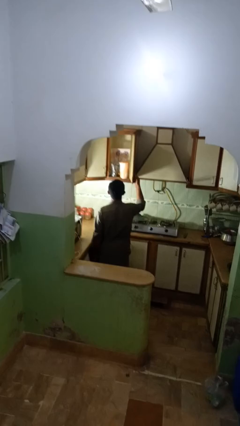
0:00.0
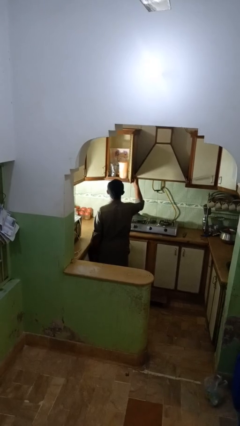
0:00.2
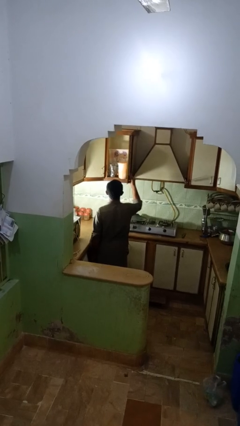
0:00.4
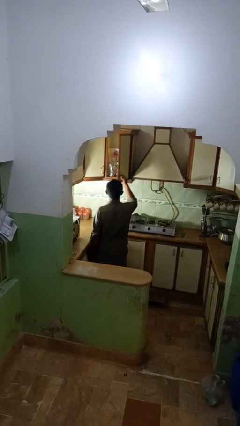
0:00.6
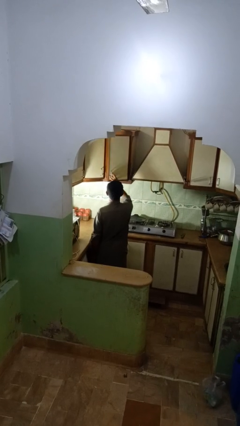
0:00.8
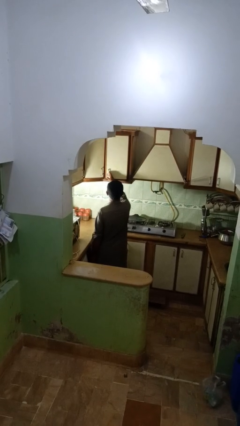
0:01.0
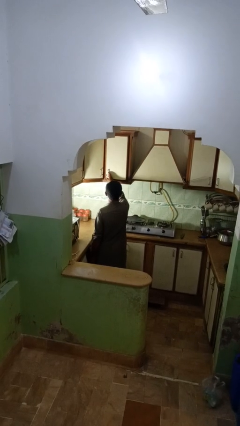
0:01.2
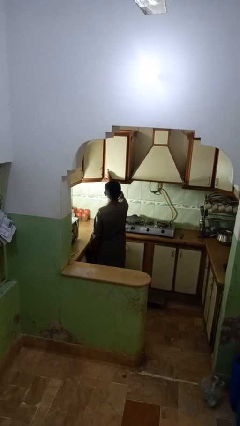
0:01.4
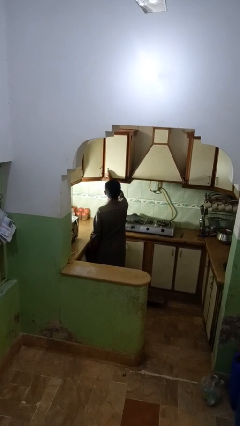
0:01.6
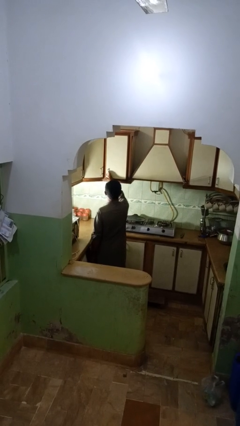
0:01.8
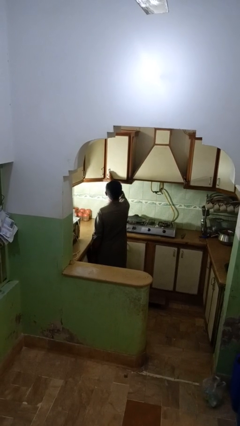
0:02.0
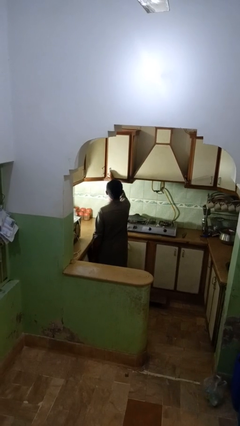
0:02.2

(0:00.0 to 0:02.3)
person closes kitchen drawer

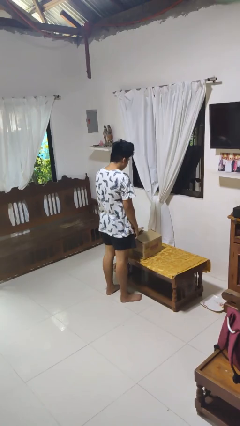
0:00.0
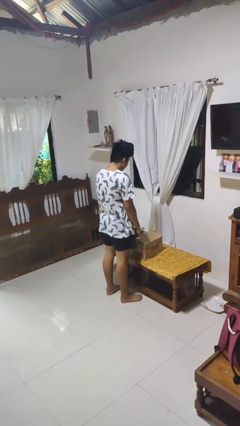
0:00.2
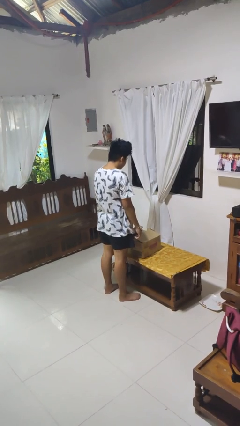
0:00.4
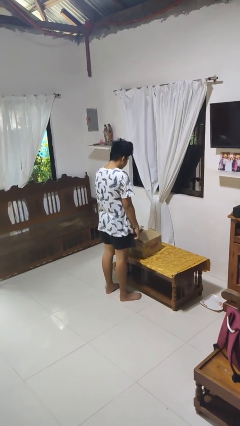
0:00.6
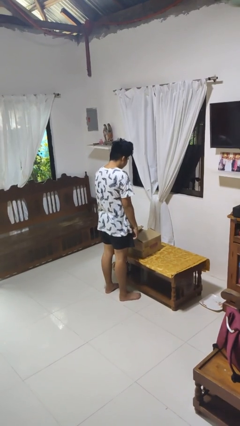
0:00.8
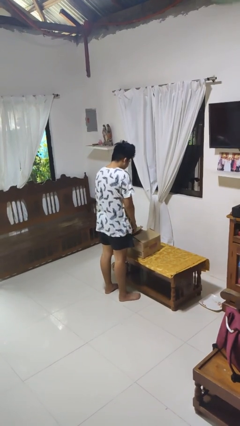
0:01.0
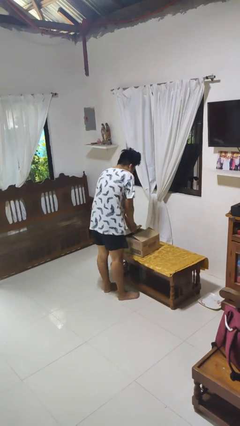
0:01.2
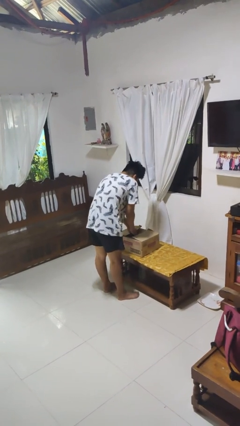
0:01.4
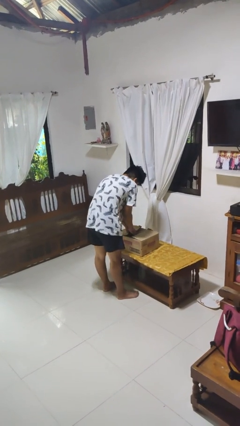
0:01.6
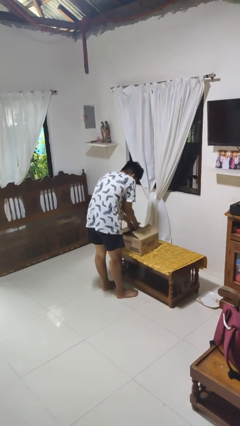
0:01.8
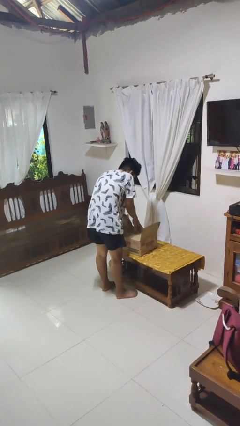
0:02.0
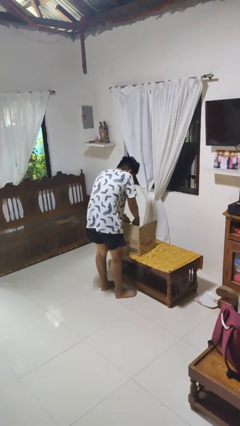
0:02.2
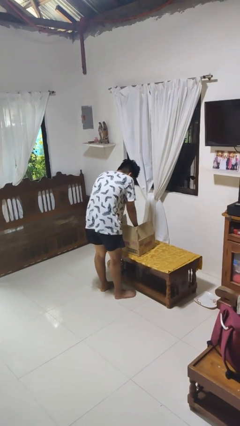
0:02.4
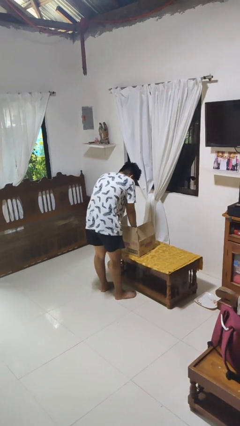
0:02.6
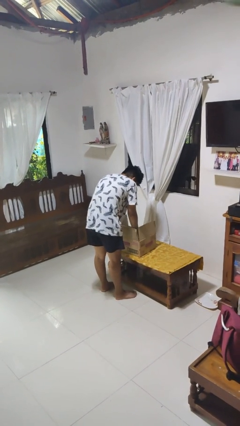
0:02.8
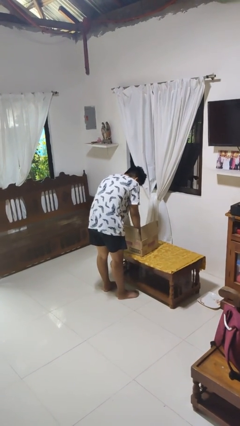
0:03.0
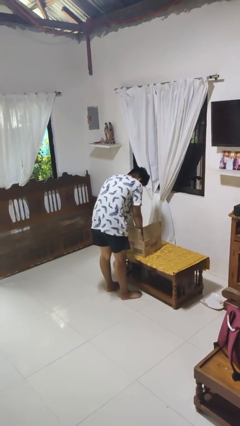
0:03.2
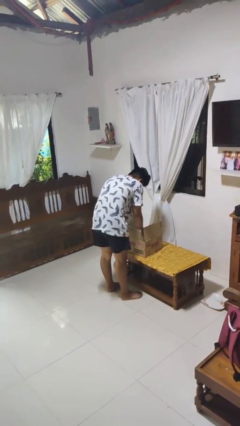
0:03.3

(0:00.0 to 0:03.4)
person searches in box

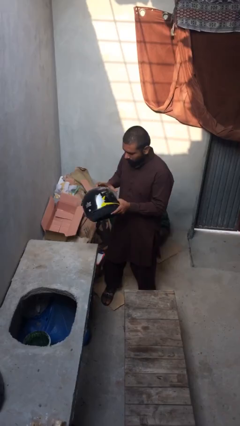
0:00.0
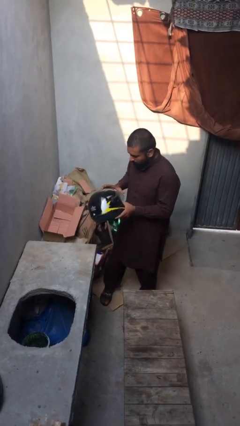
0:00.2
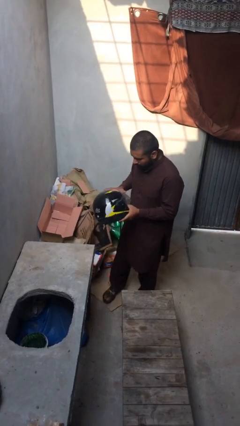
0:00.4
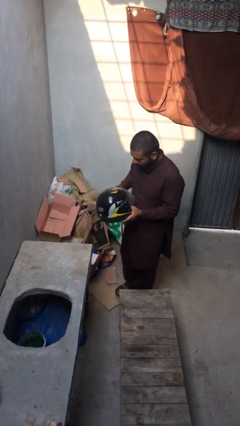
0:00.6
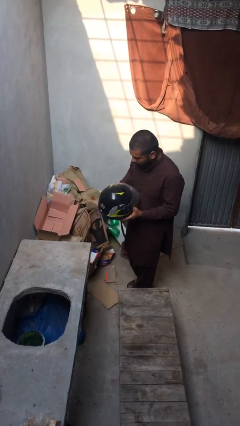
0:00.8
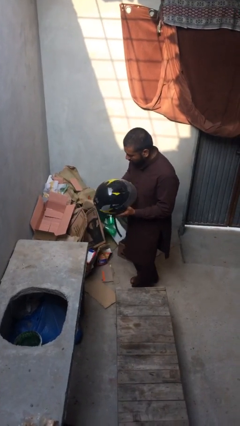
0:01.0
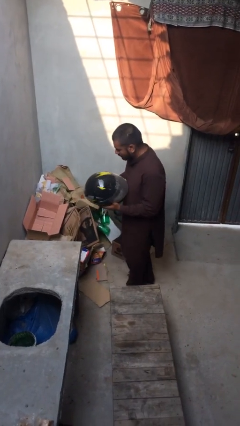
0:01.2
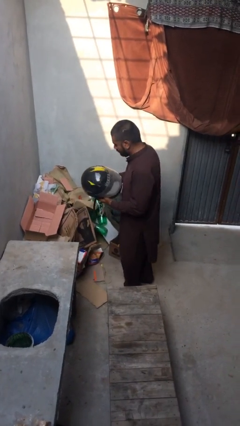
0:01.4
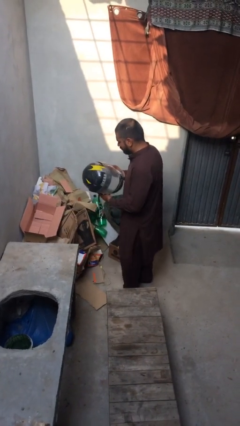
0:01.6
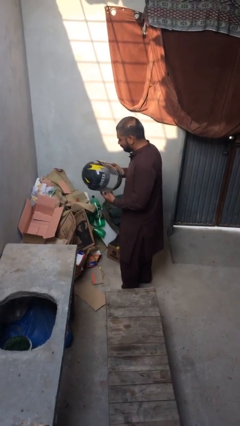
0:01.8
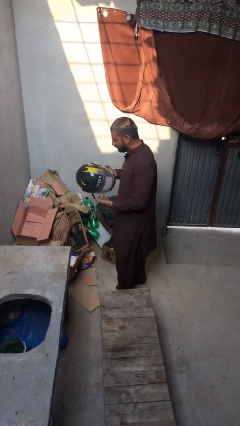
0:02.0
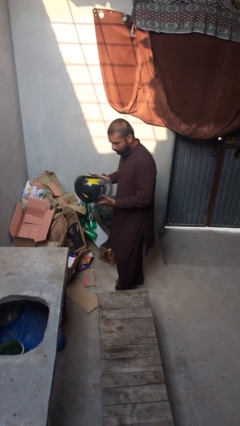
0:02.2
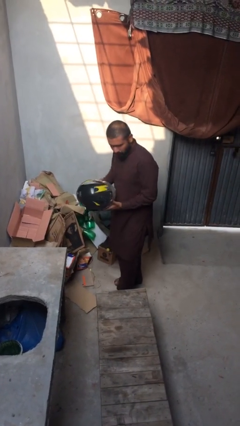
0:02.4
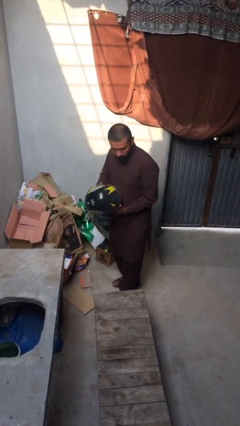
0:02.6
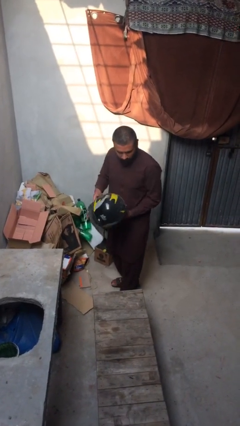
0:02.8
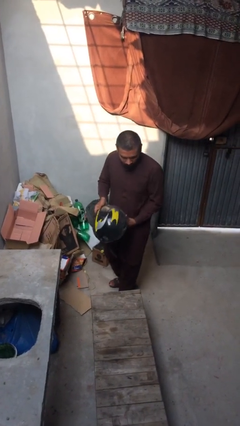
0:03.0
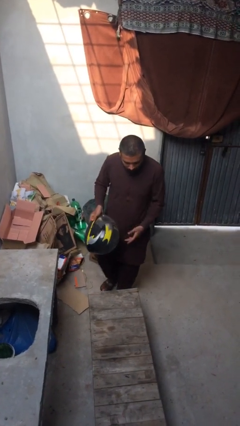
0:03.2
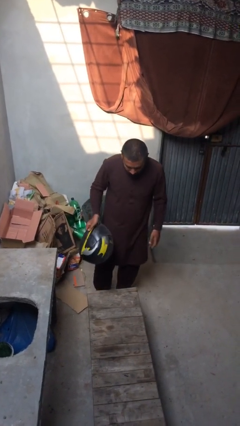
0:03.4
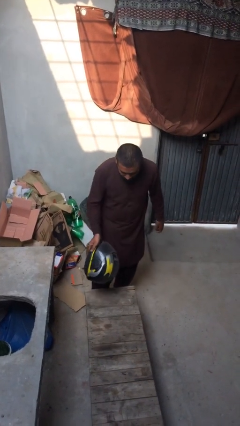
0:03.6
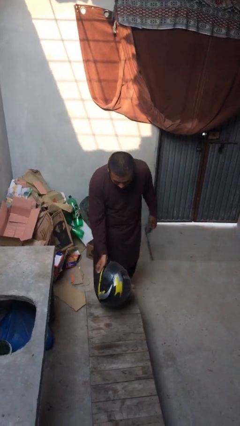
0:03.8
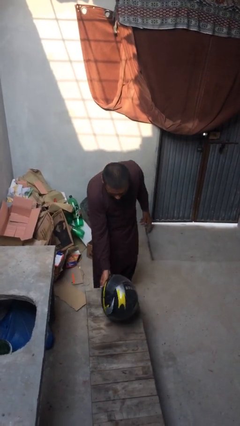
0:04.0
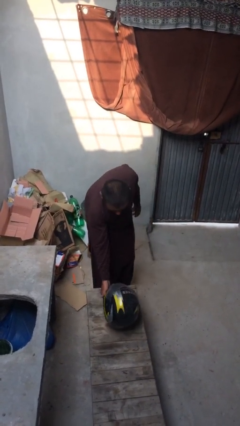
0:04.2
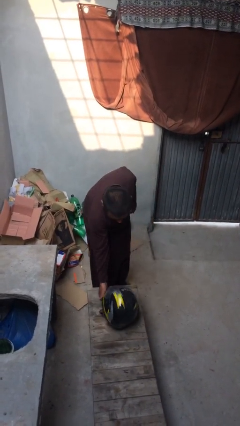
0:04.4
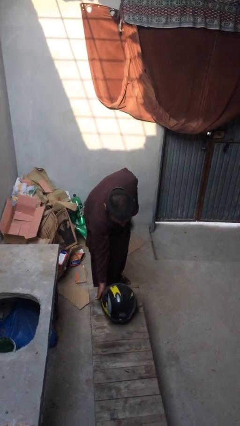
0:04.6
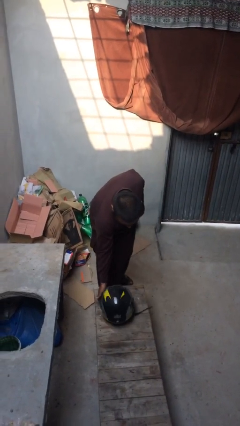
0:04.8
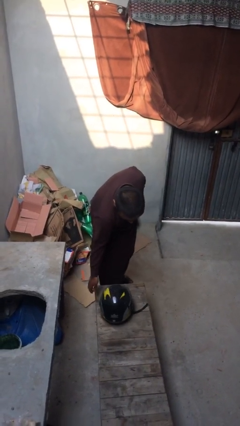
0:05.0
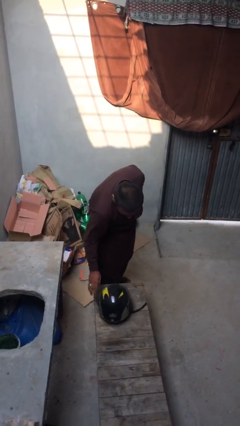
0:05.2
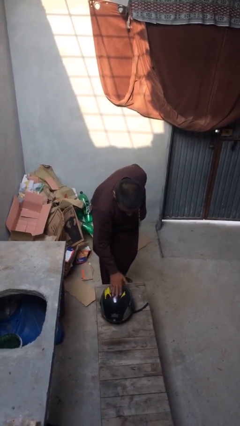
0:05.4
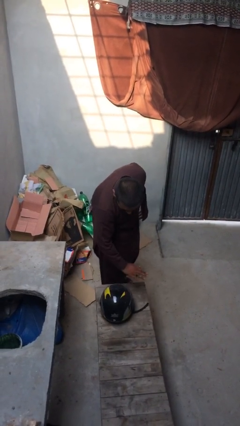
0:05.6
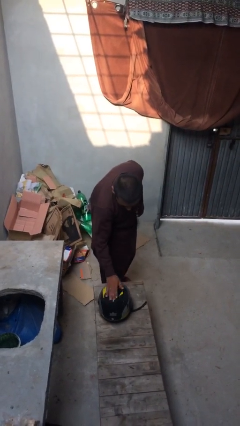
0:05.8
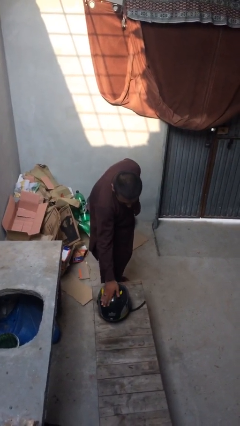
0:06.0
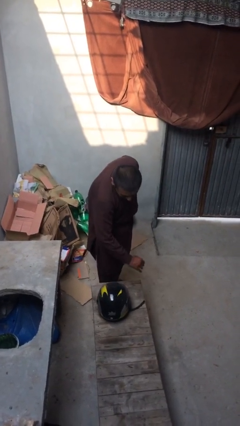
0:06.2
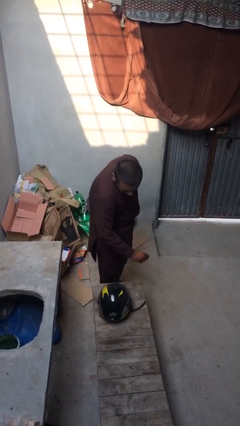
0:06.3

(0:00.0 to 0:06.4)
person puts down object on table

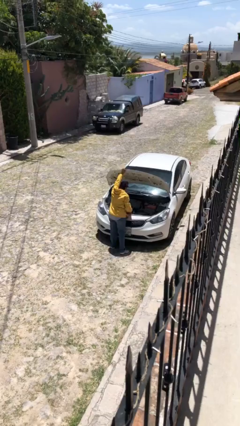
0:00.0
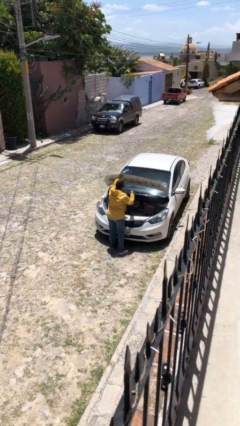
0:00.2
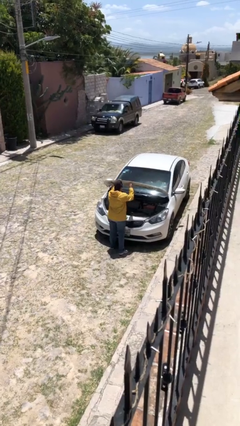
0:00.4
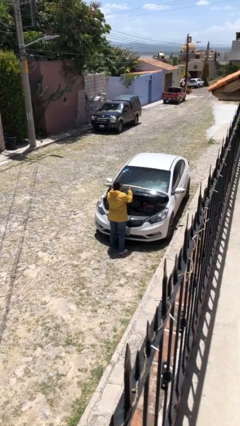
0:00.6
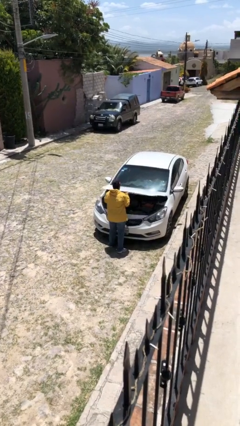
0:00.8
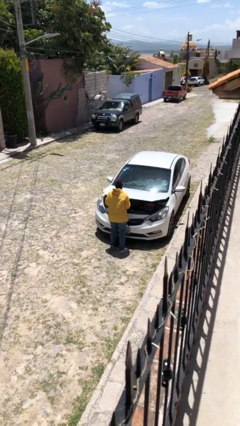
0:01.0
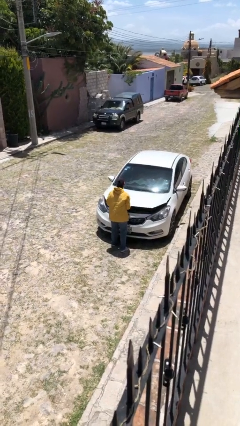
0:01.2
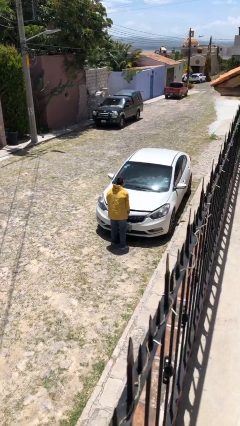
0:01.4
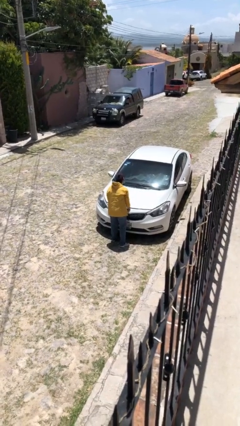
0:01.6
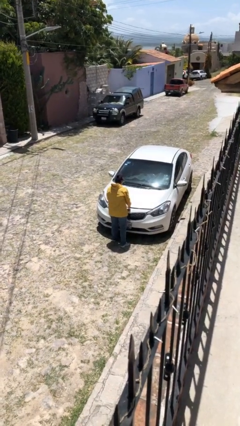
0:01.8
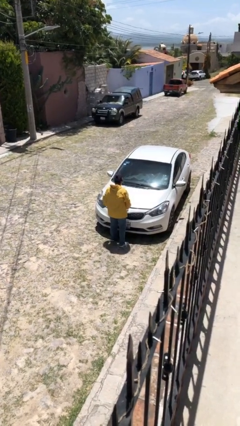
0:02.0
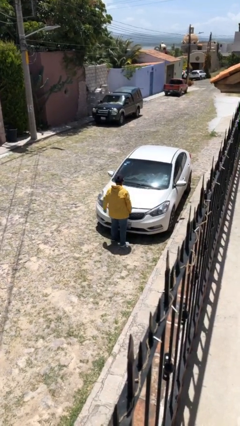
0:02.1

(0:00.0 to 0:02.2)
person closes car hood

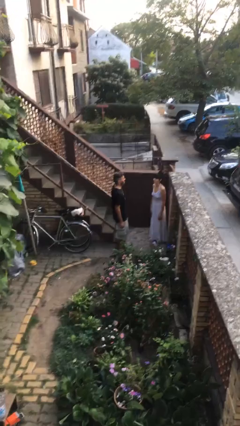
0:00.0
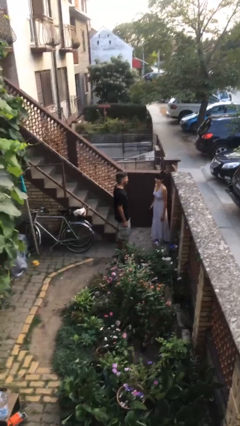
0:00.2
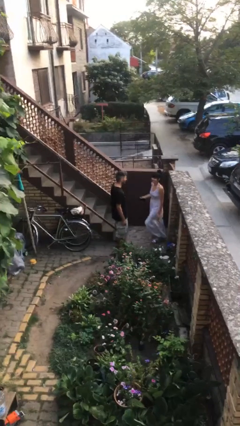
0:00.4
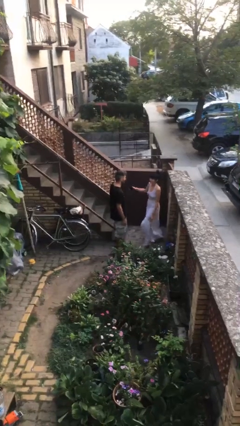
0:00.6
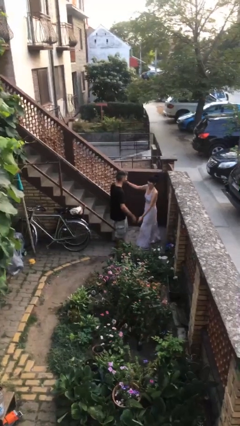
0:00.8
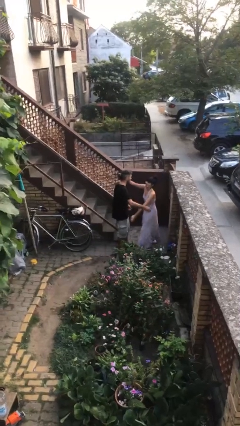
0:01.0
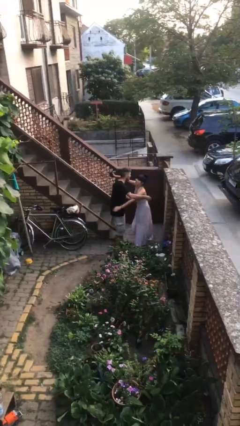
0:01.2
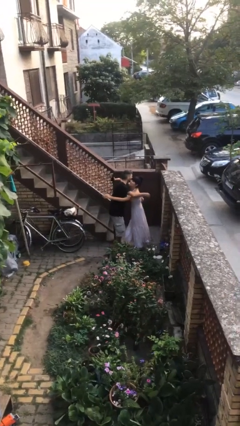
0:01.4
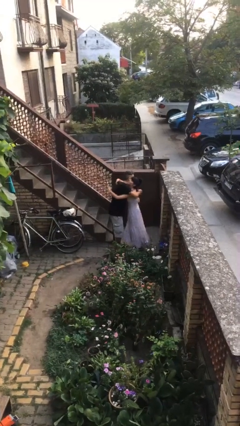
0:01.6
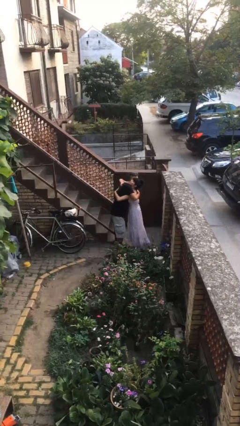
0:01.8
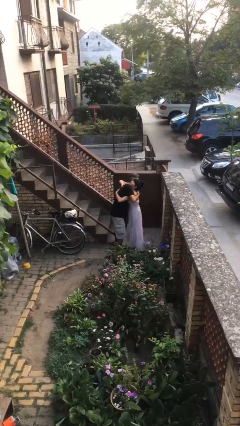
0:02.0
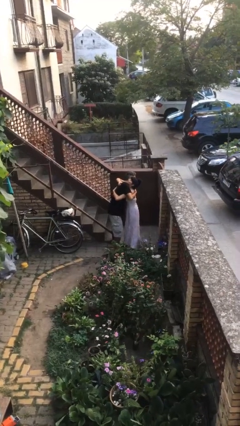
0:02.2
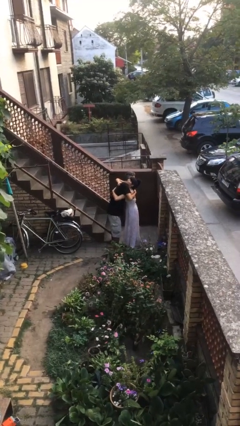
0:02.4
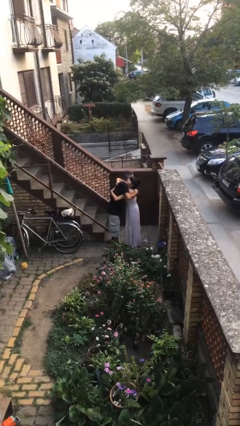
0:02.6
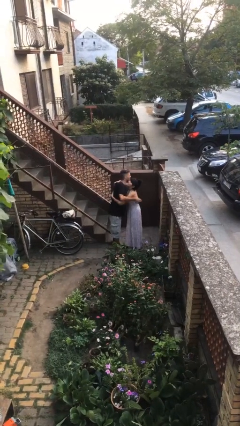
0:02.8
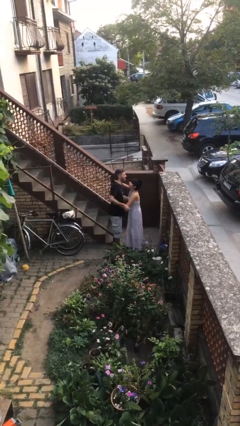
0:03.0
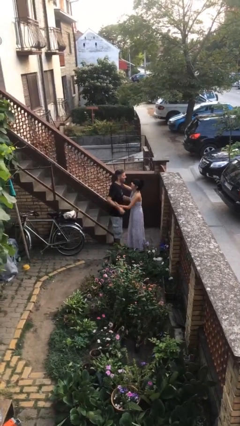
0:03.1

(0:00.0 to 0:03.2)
person embraces person

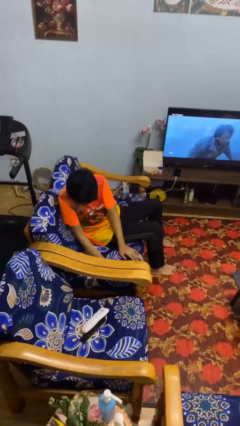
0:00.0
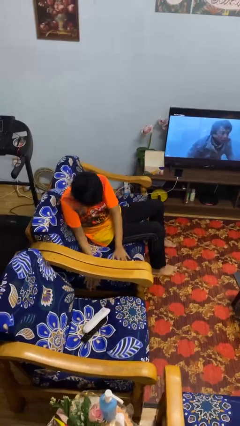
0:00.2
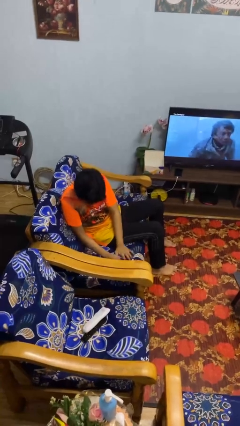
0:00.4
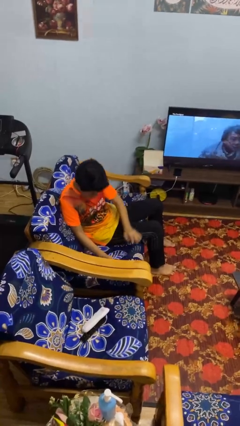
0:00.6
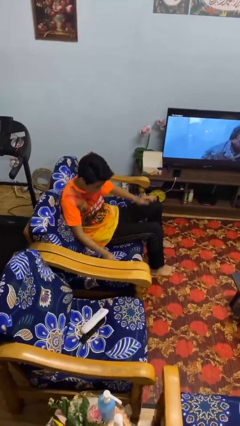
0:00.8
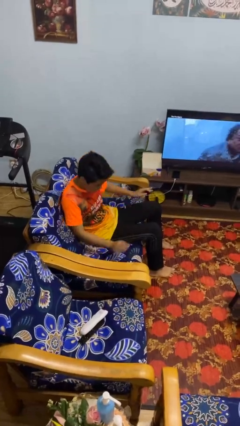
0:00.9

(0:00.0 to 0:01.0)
person searches in couch
